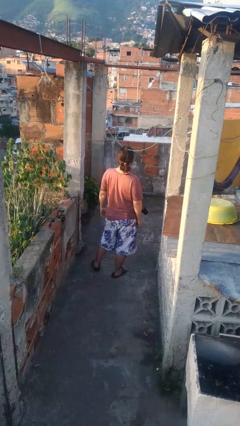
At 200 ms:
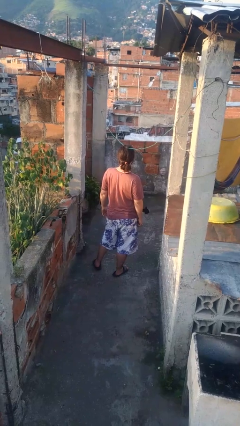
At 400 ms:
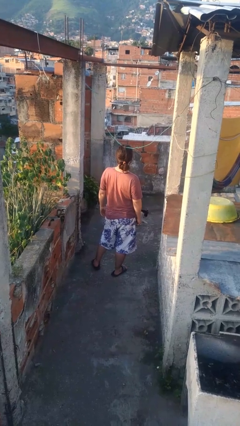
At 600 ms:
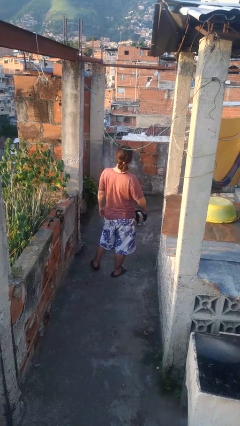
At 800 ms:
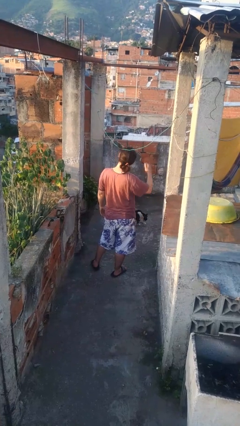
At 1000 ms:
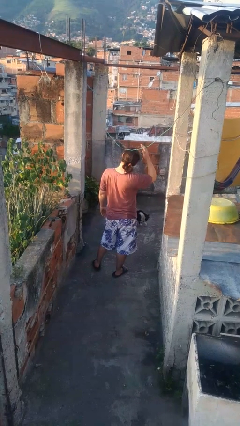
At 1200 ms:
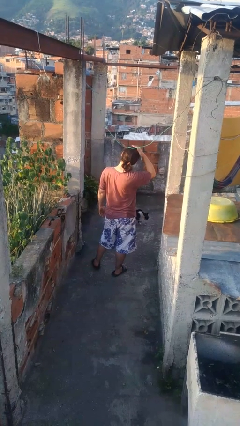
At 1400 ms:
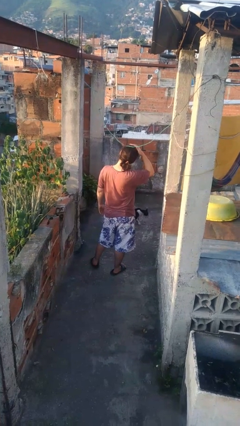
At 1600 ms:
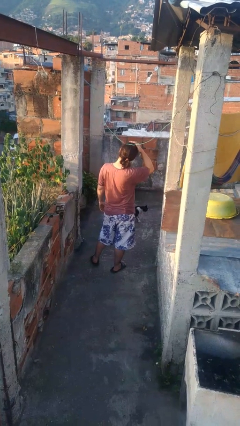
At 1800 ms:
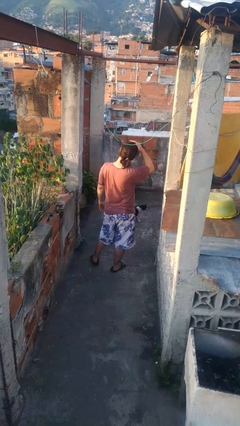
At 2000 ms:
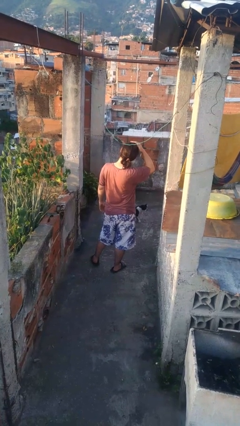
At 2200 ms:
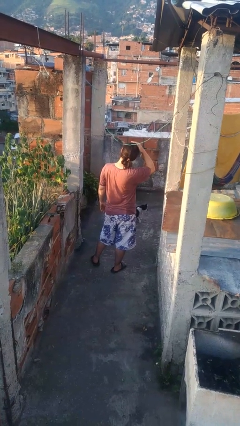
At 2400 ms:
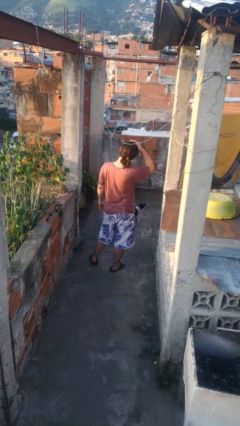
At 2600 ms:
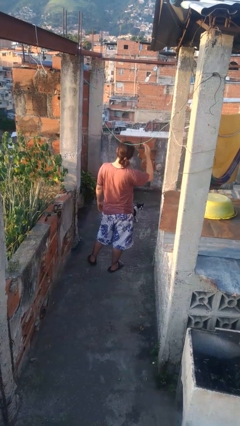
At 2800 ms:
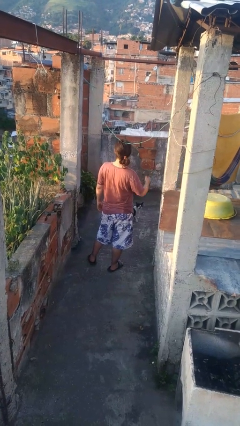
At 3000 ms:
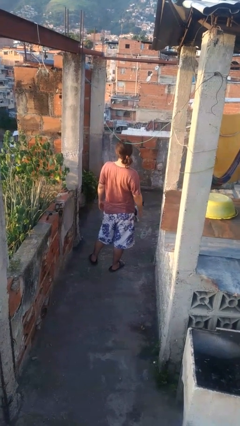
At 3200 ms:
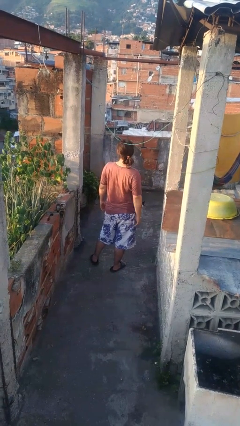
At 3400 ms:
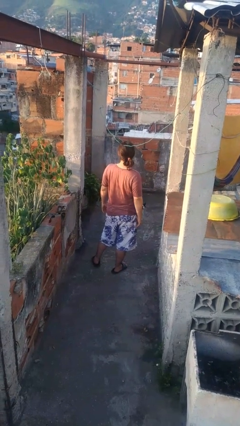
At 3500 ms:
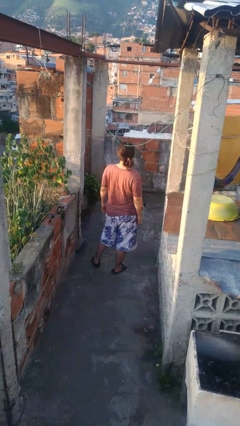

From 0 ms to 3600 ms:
person pats head

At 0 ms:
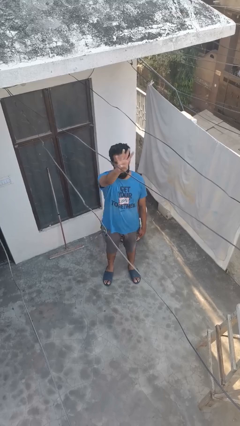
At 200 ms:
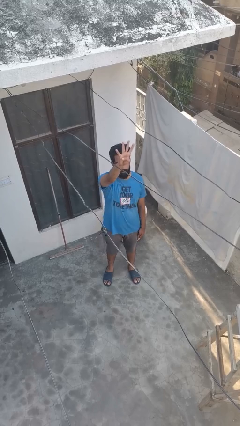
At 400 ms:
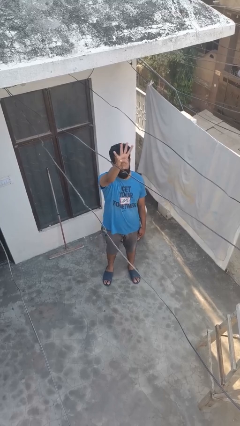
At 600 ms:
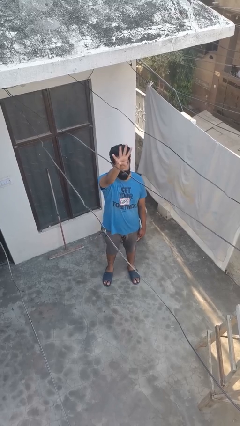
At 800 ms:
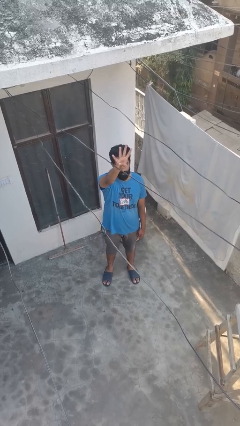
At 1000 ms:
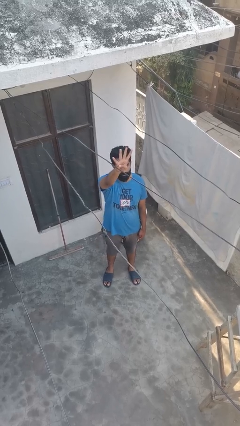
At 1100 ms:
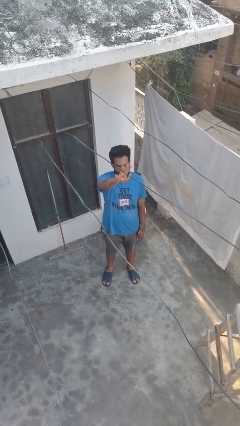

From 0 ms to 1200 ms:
person gestures number four

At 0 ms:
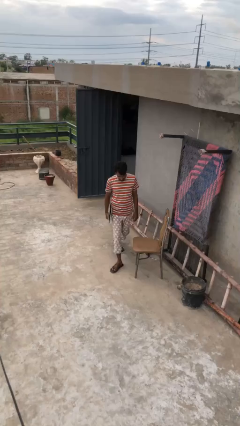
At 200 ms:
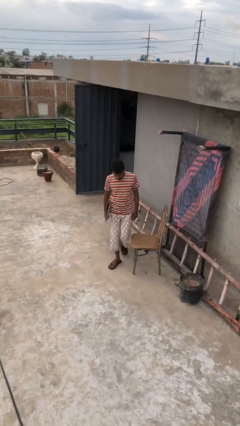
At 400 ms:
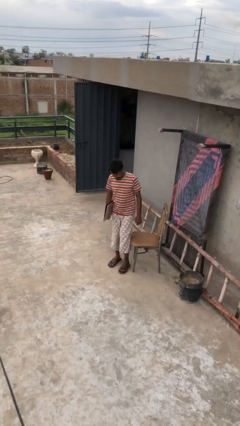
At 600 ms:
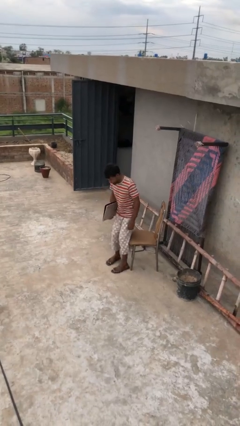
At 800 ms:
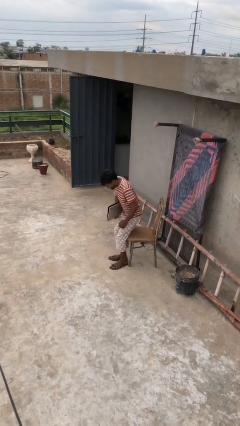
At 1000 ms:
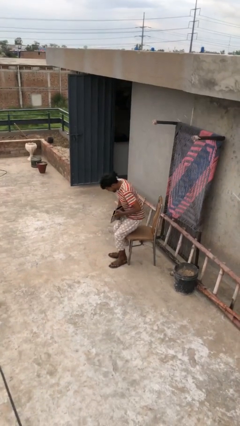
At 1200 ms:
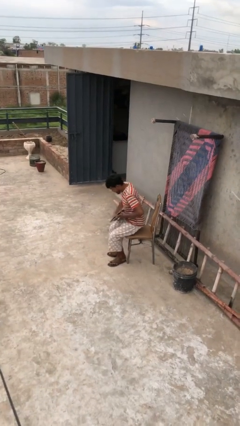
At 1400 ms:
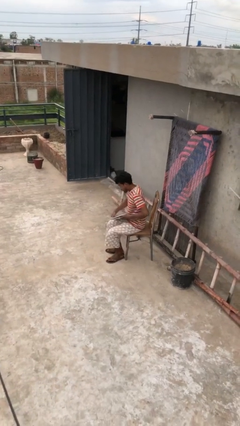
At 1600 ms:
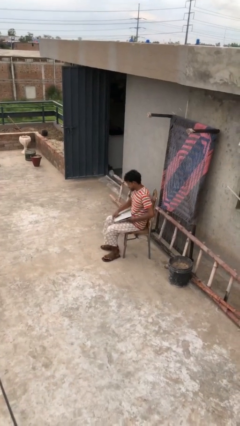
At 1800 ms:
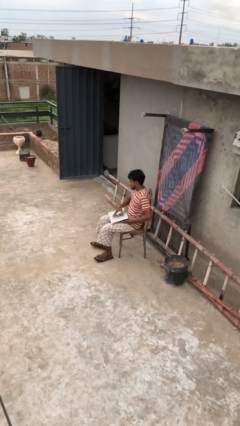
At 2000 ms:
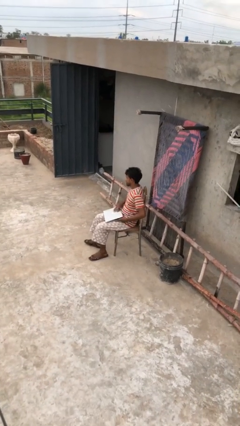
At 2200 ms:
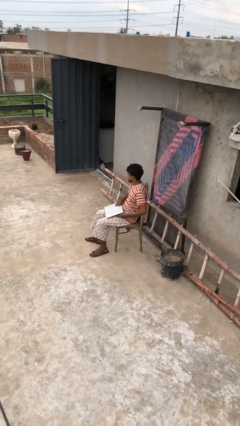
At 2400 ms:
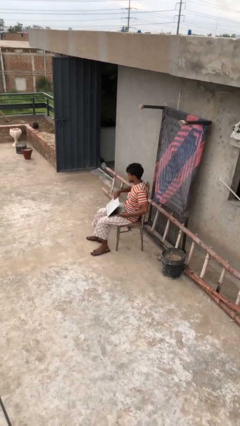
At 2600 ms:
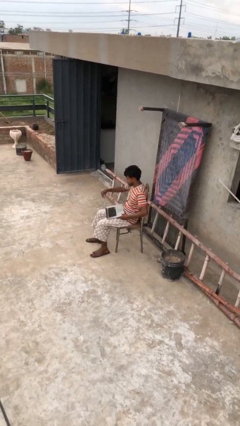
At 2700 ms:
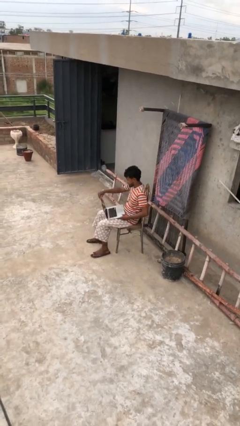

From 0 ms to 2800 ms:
person sits down

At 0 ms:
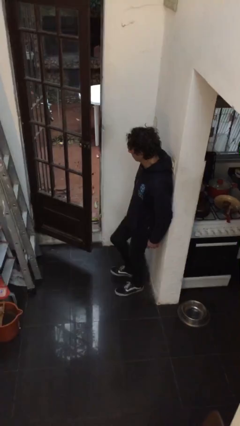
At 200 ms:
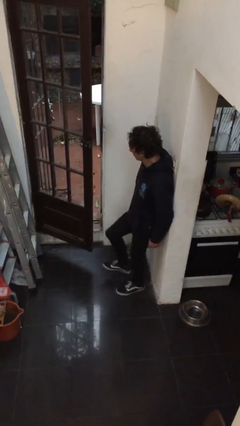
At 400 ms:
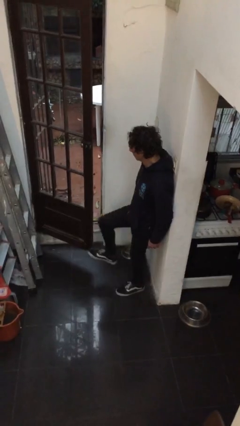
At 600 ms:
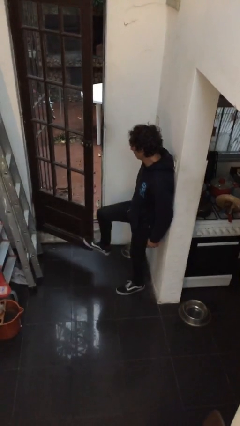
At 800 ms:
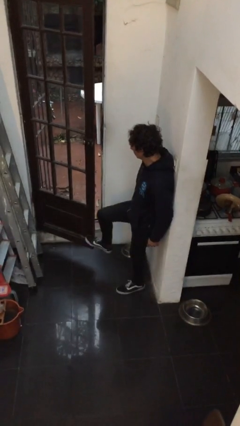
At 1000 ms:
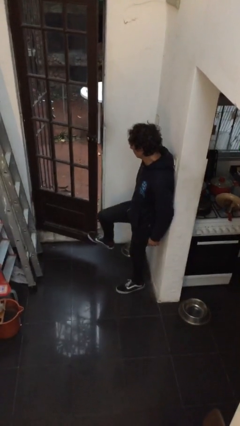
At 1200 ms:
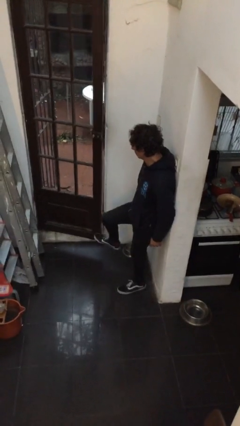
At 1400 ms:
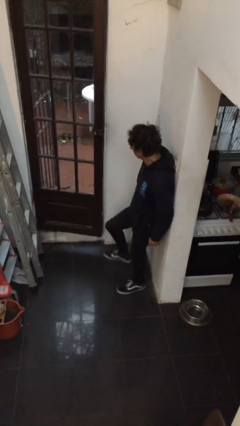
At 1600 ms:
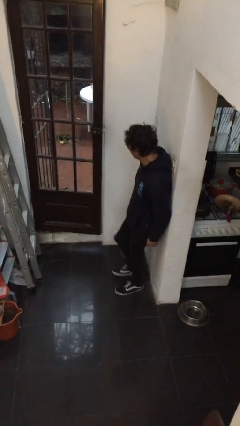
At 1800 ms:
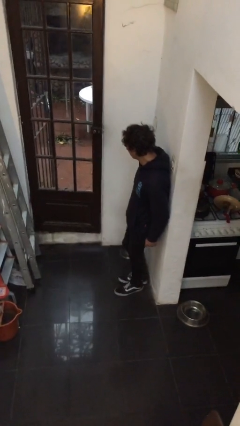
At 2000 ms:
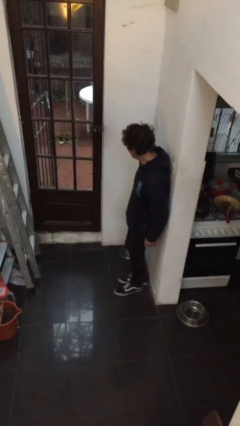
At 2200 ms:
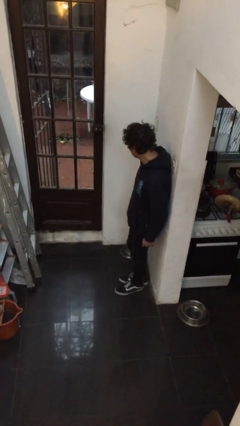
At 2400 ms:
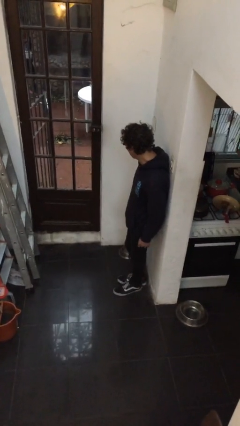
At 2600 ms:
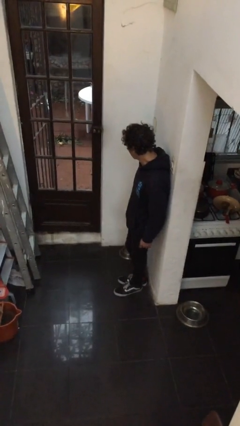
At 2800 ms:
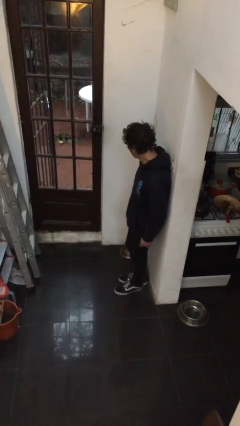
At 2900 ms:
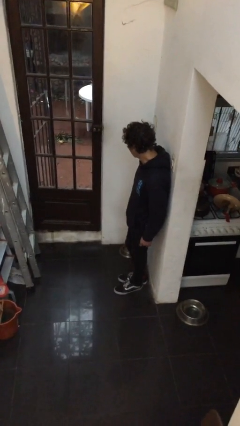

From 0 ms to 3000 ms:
person closes door with foot

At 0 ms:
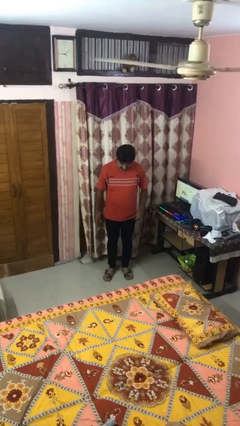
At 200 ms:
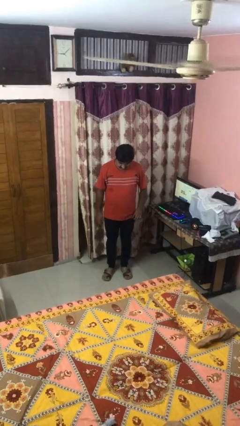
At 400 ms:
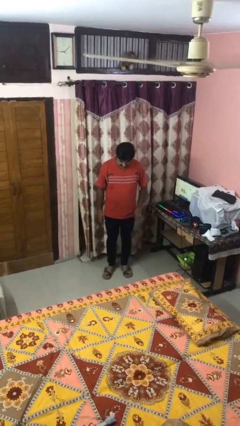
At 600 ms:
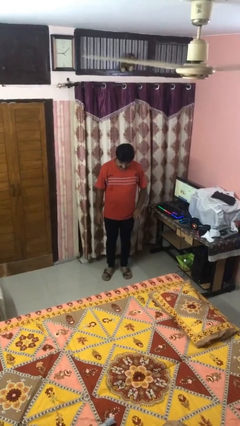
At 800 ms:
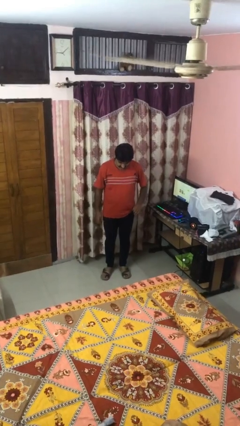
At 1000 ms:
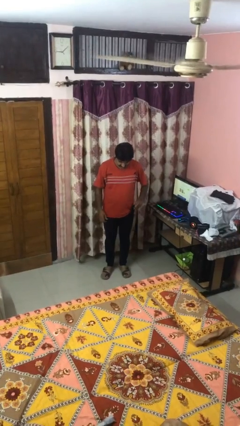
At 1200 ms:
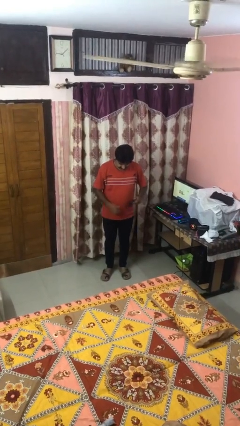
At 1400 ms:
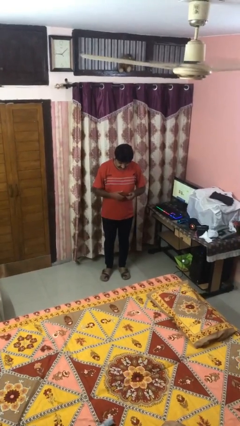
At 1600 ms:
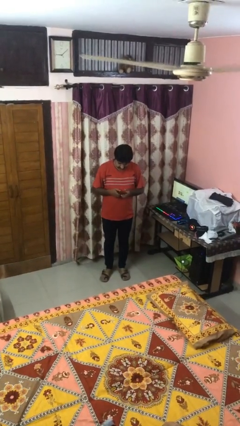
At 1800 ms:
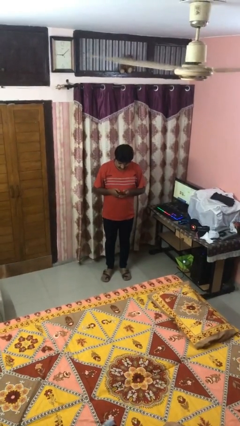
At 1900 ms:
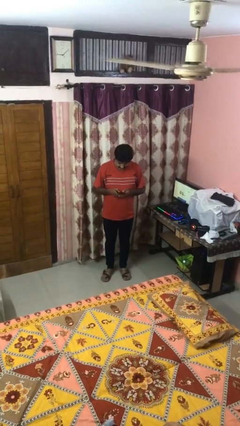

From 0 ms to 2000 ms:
person takes phone from pocket

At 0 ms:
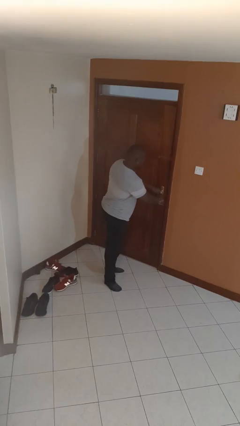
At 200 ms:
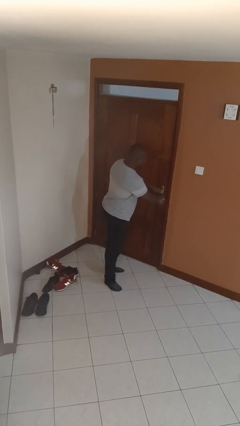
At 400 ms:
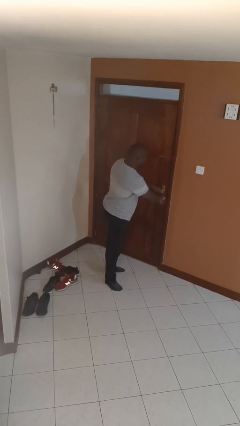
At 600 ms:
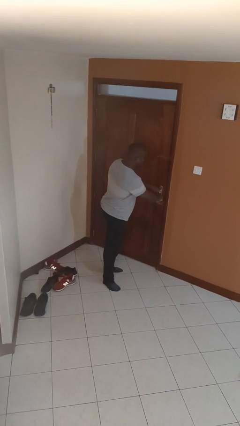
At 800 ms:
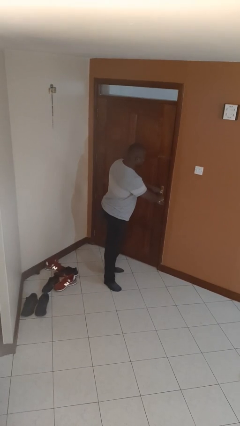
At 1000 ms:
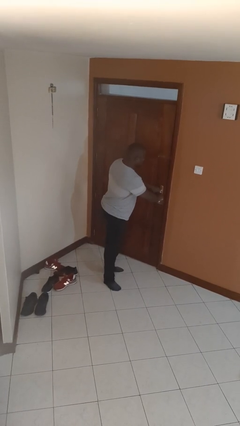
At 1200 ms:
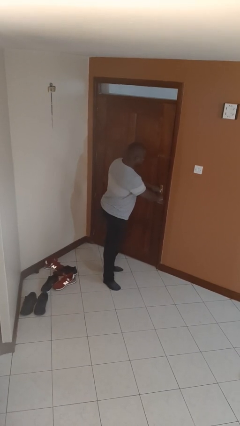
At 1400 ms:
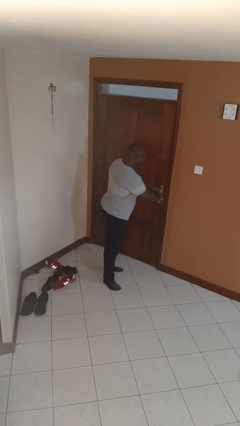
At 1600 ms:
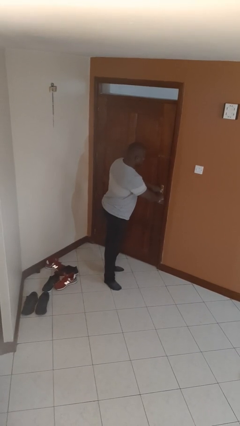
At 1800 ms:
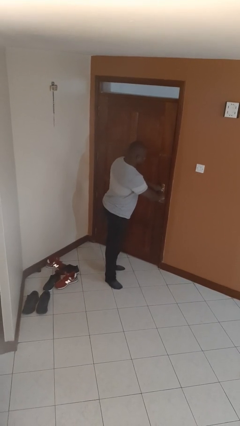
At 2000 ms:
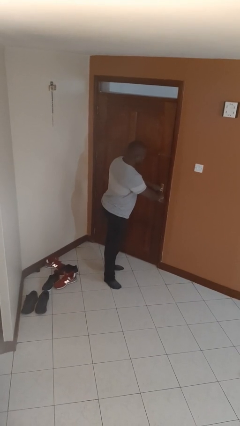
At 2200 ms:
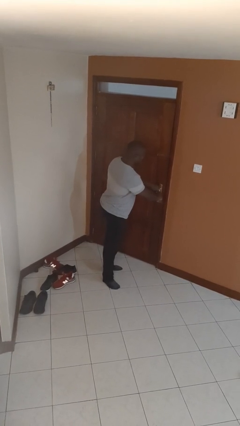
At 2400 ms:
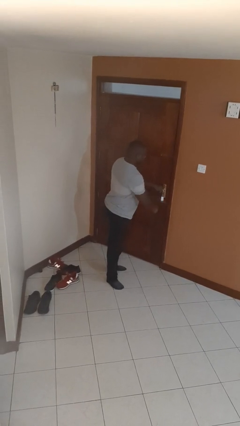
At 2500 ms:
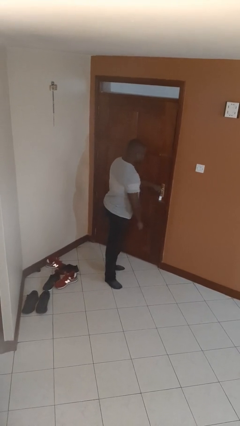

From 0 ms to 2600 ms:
person unlocks door with keys

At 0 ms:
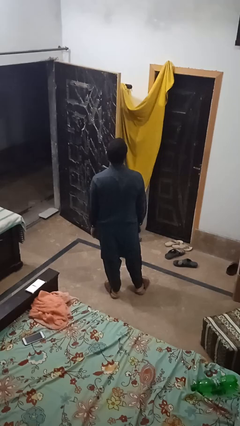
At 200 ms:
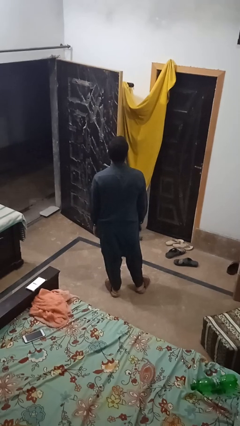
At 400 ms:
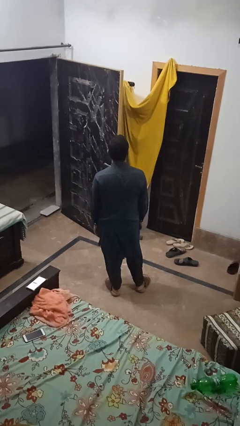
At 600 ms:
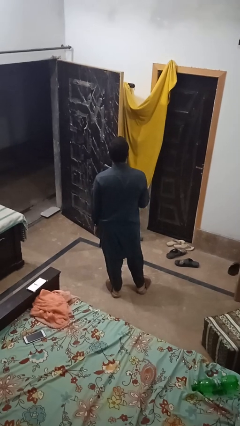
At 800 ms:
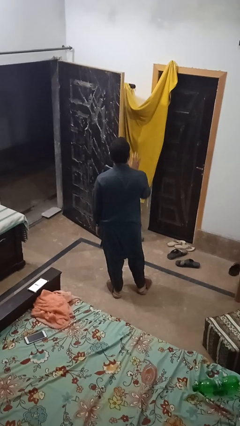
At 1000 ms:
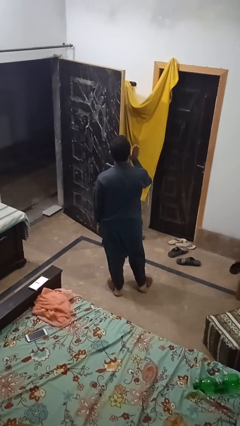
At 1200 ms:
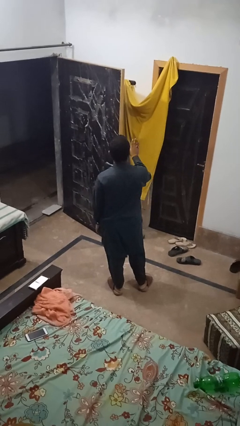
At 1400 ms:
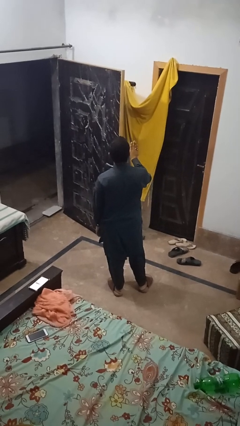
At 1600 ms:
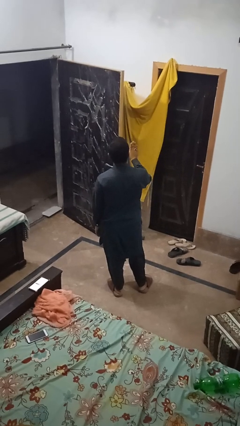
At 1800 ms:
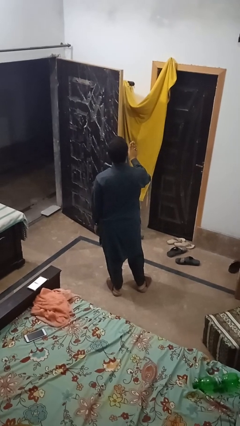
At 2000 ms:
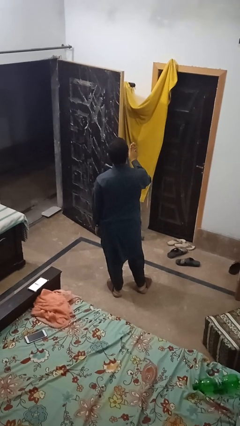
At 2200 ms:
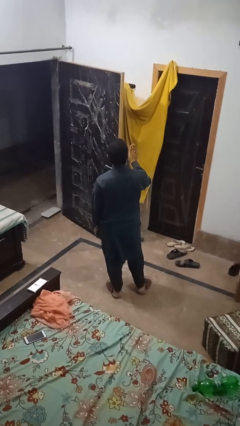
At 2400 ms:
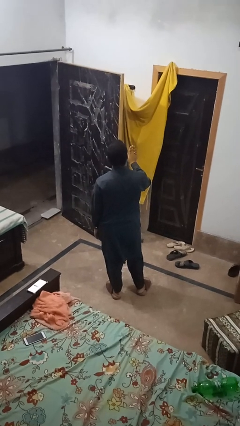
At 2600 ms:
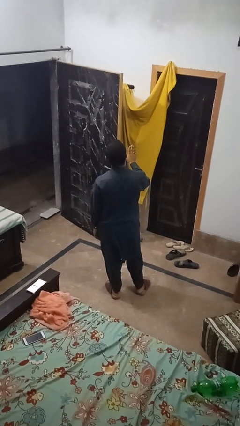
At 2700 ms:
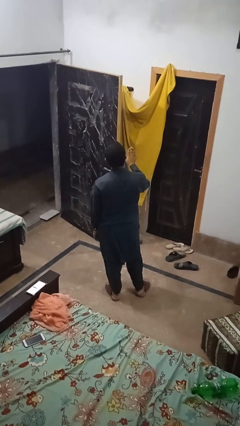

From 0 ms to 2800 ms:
person gestures stop
